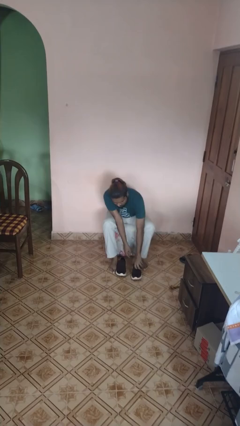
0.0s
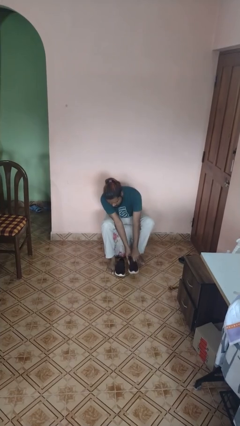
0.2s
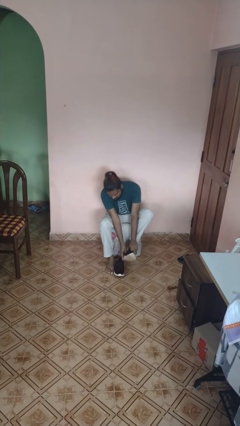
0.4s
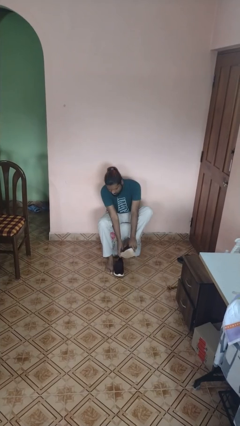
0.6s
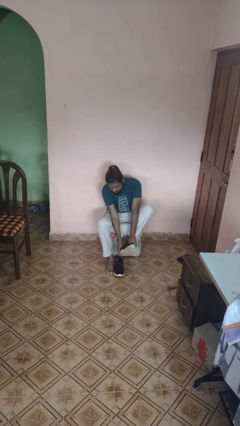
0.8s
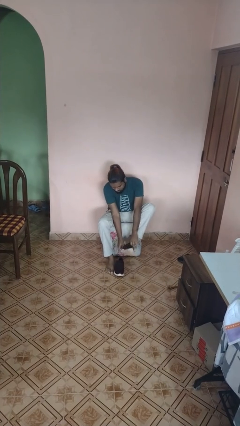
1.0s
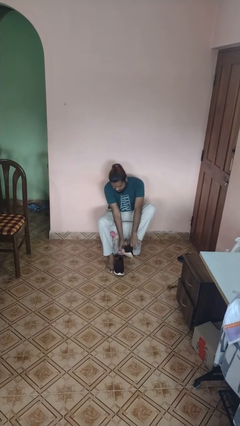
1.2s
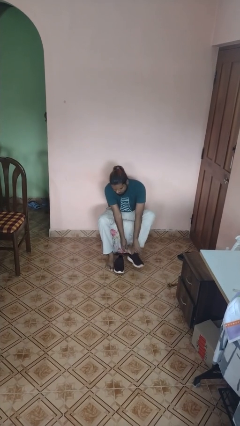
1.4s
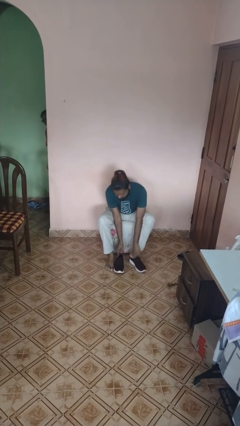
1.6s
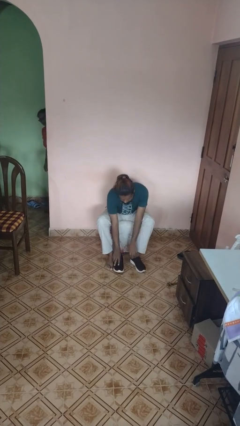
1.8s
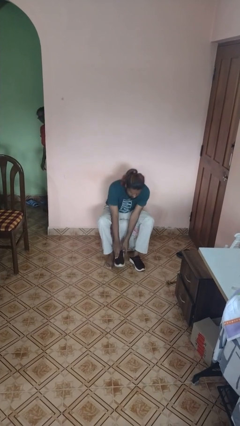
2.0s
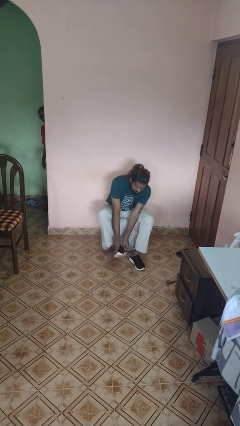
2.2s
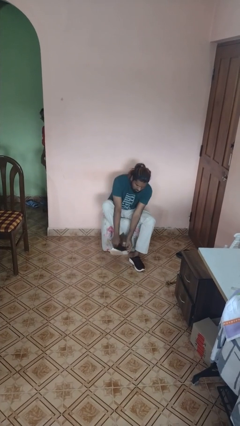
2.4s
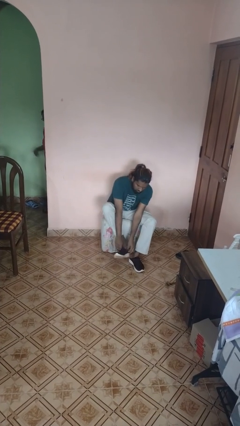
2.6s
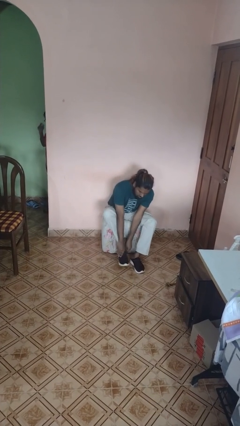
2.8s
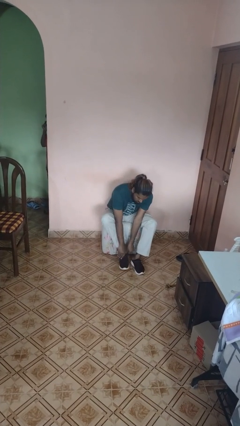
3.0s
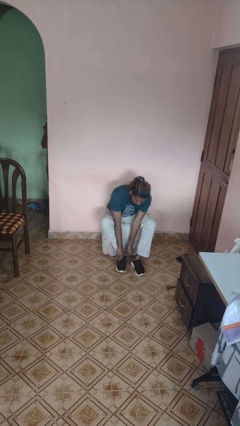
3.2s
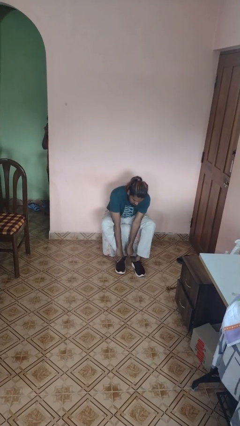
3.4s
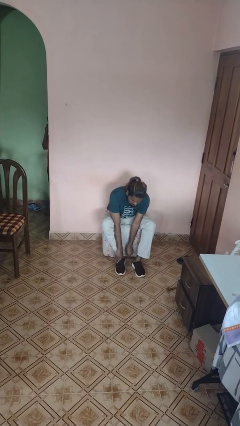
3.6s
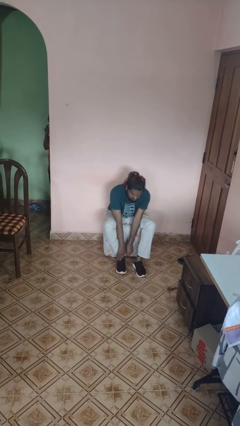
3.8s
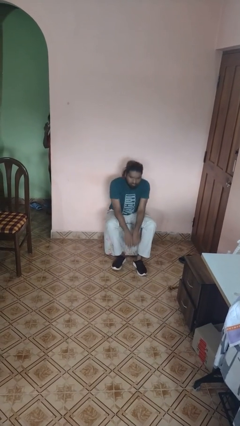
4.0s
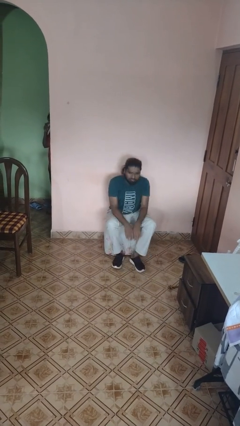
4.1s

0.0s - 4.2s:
person puts on shoes

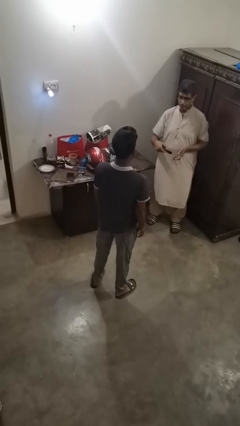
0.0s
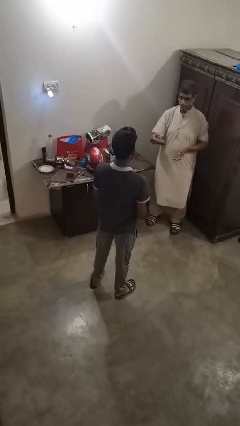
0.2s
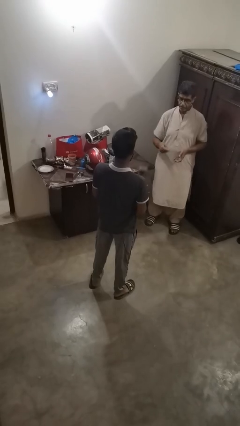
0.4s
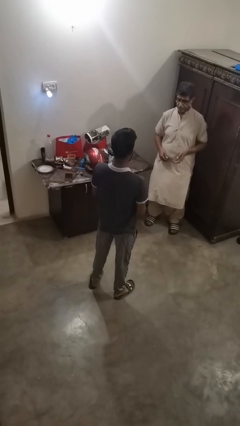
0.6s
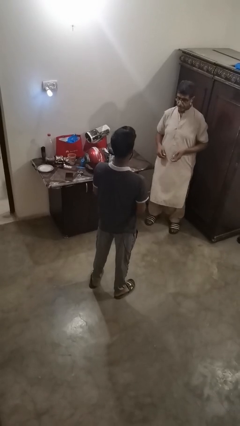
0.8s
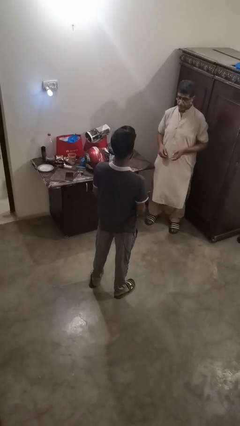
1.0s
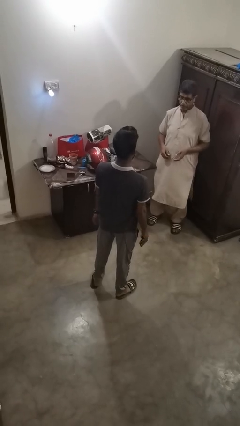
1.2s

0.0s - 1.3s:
person catches object from person

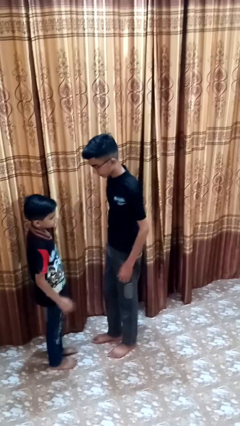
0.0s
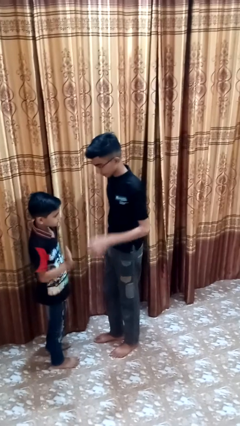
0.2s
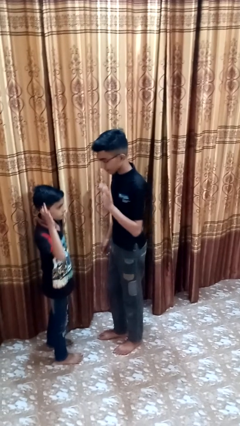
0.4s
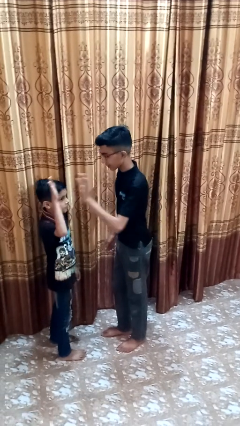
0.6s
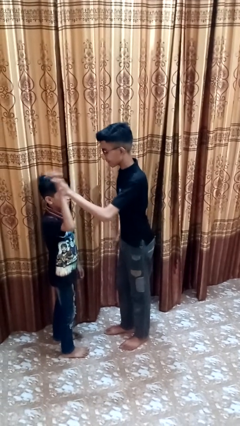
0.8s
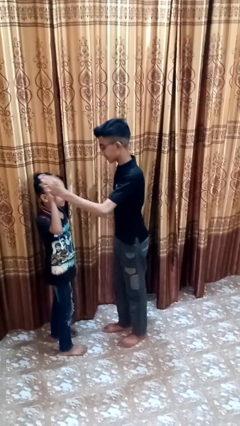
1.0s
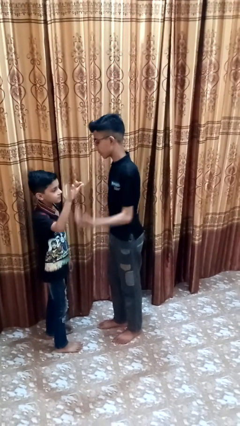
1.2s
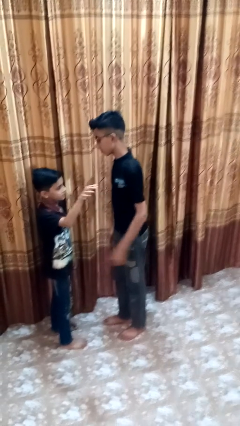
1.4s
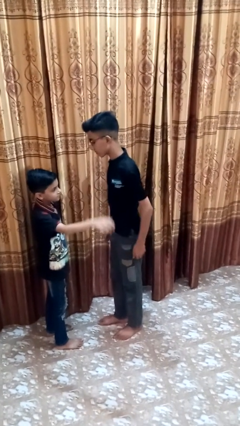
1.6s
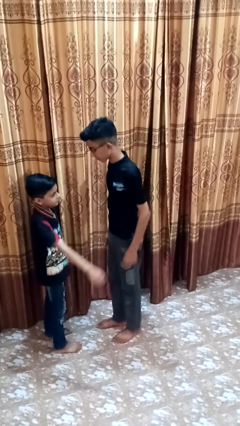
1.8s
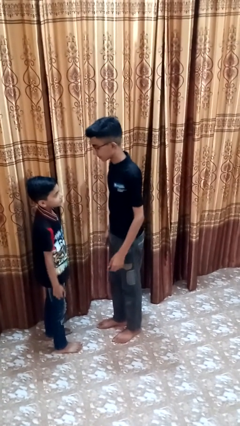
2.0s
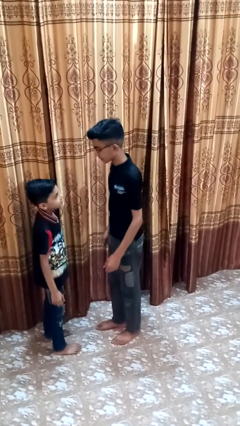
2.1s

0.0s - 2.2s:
person highfives hand

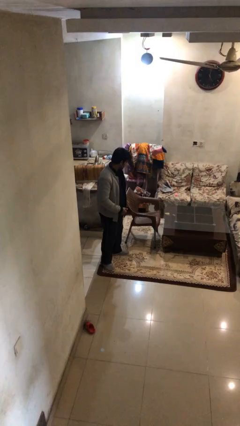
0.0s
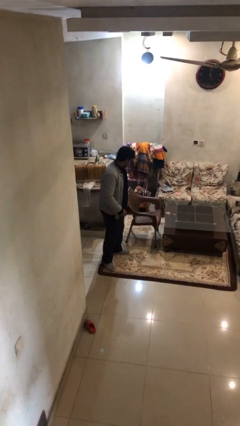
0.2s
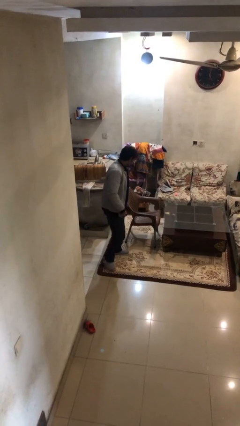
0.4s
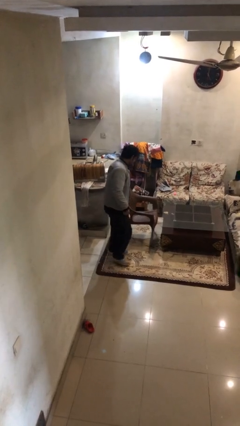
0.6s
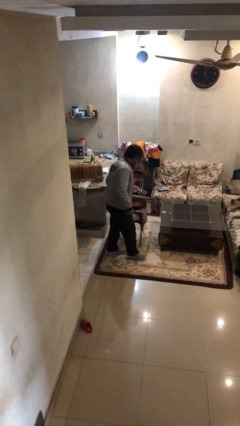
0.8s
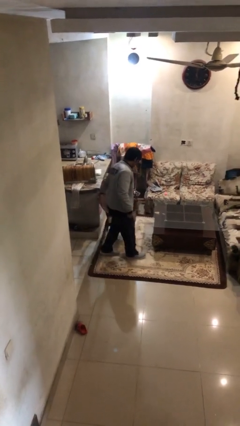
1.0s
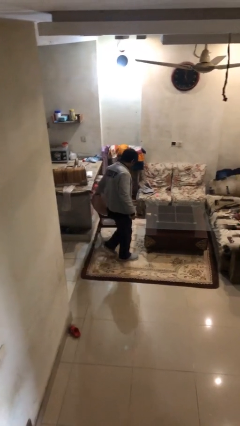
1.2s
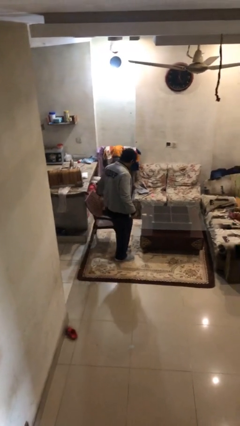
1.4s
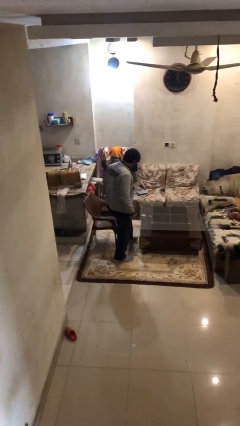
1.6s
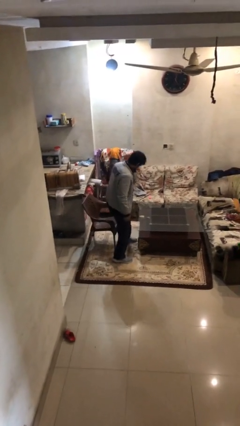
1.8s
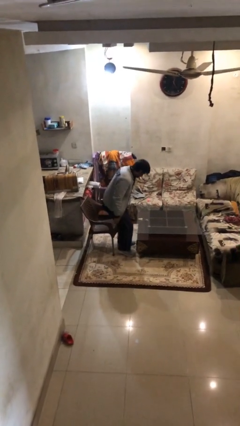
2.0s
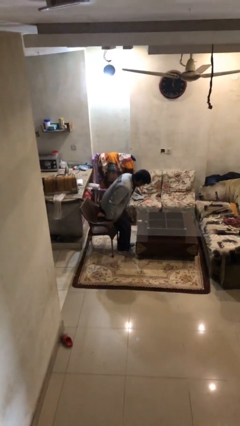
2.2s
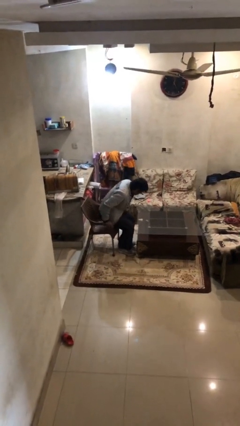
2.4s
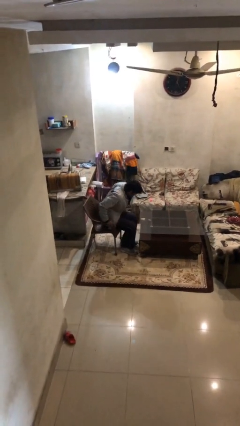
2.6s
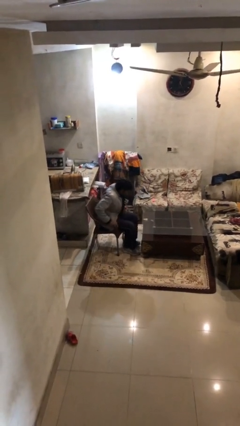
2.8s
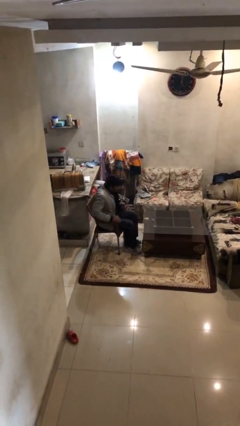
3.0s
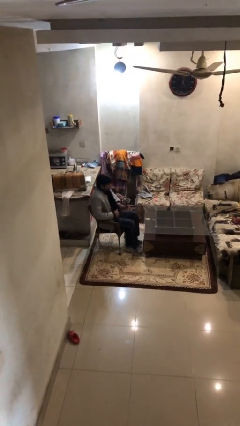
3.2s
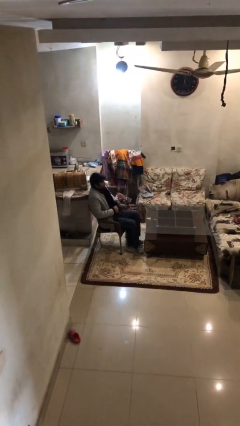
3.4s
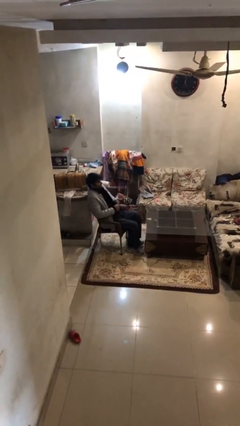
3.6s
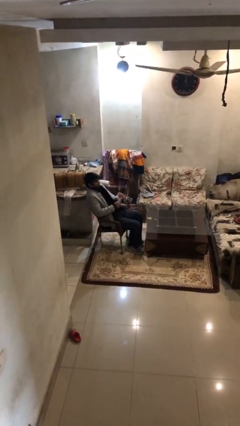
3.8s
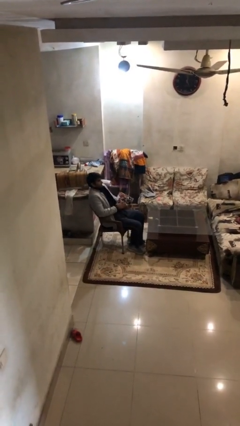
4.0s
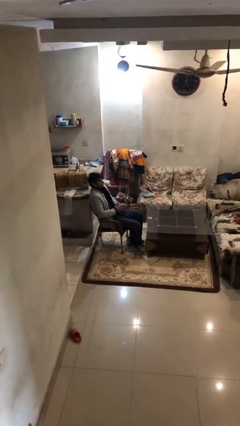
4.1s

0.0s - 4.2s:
person sits down

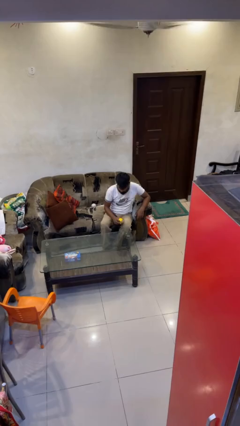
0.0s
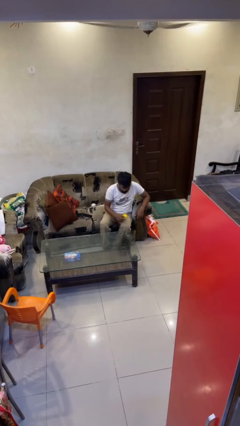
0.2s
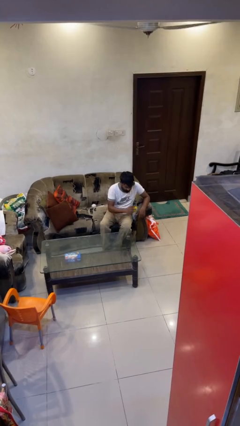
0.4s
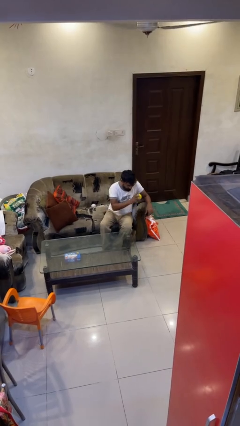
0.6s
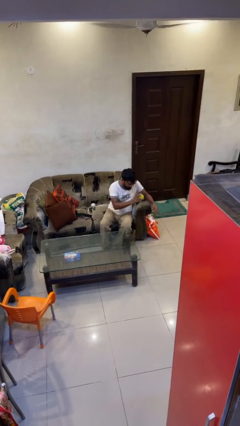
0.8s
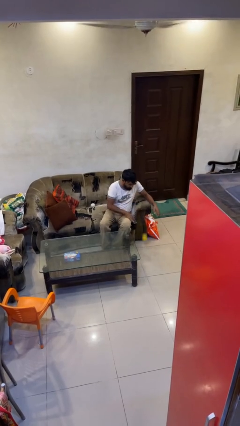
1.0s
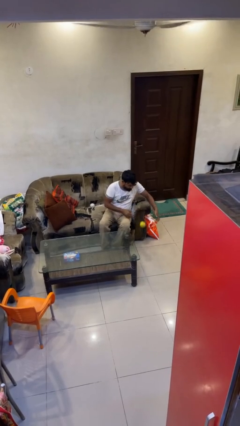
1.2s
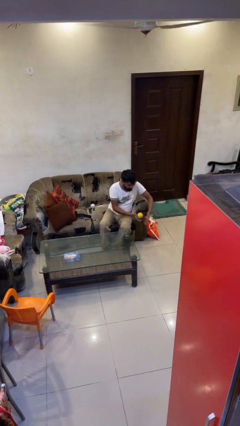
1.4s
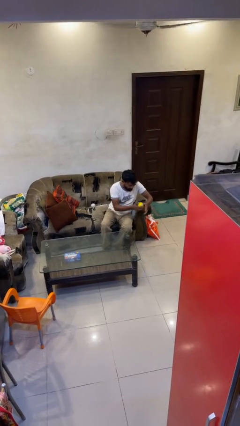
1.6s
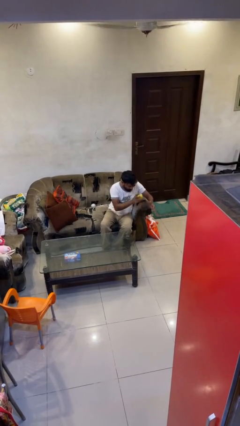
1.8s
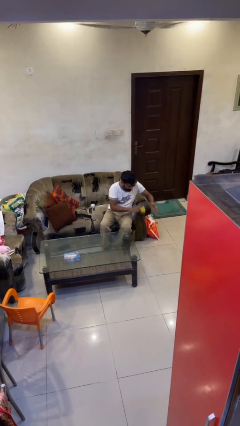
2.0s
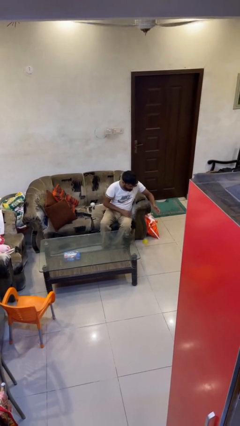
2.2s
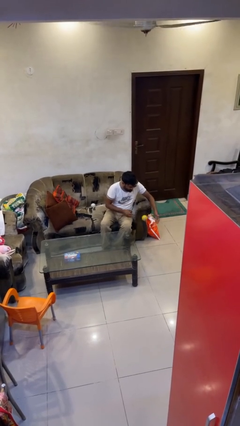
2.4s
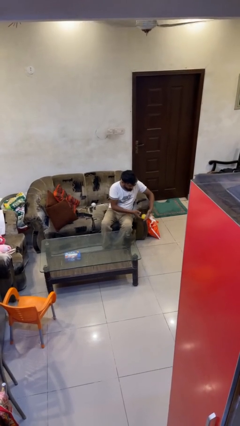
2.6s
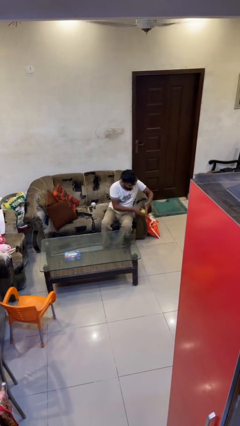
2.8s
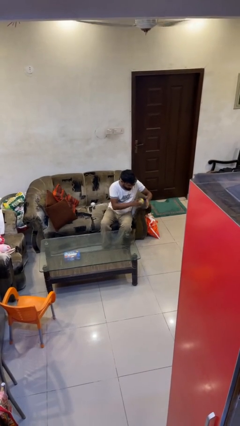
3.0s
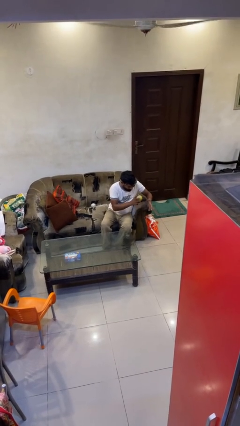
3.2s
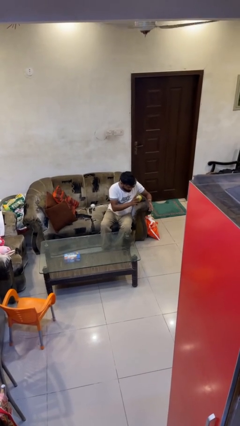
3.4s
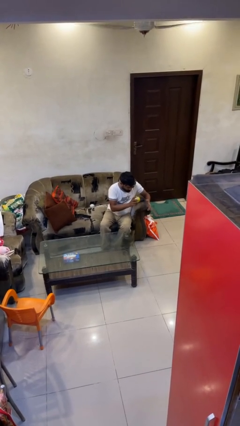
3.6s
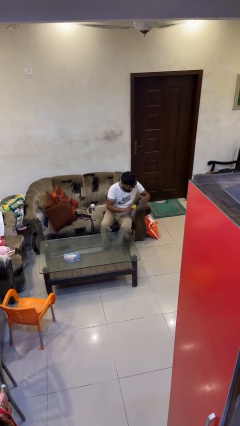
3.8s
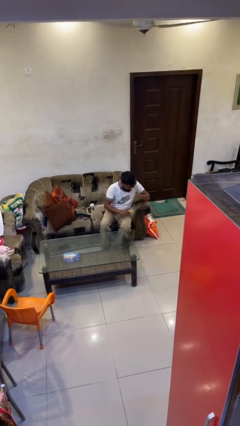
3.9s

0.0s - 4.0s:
person bounces ball on floor

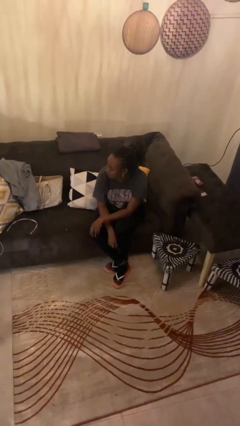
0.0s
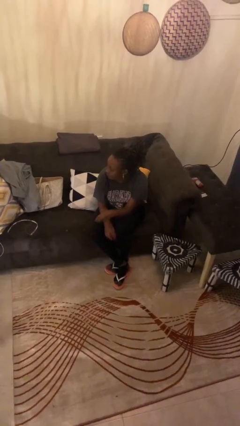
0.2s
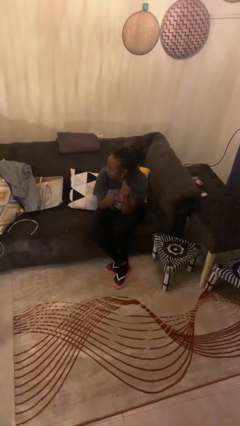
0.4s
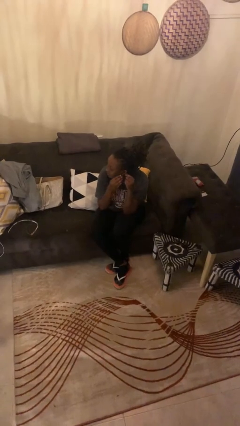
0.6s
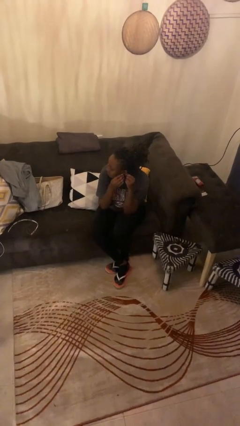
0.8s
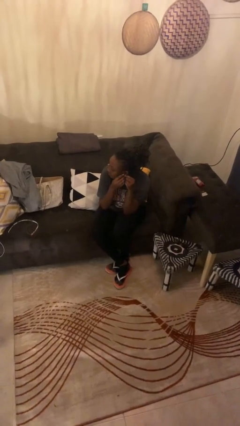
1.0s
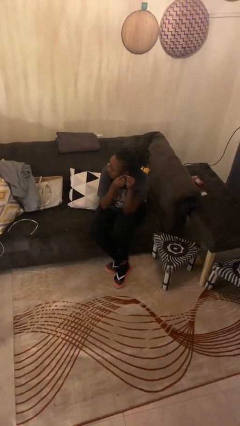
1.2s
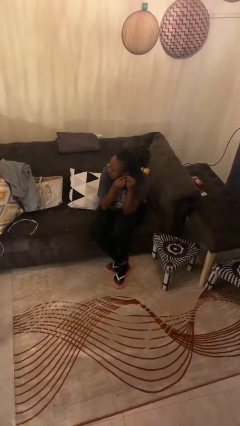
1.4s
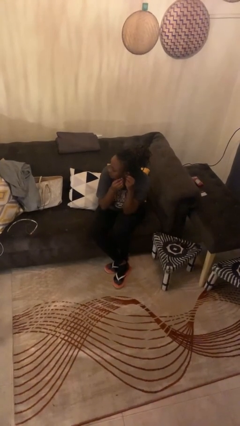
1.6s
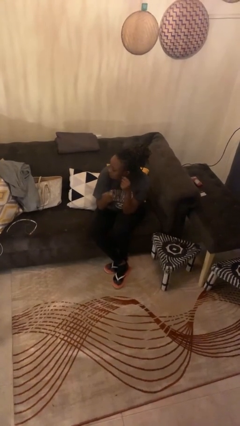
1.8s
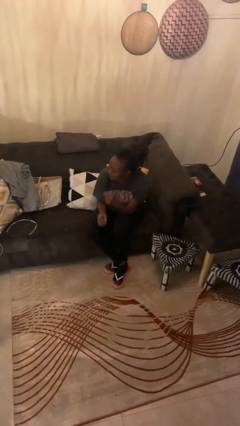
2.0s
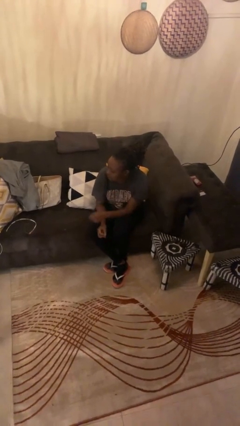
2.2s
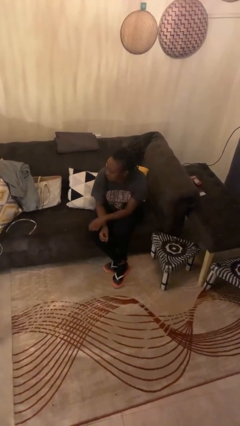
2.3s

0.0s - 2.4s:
person takes off earrings
